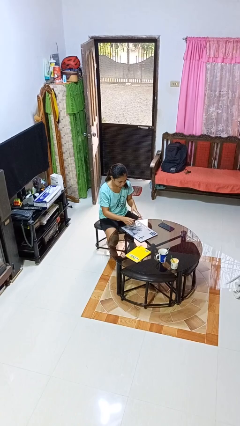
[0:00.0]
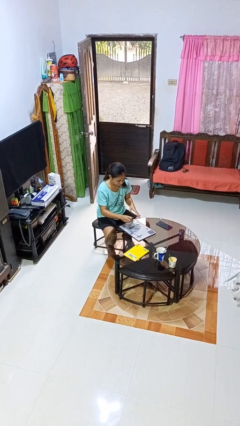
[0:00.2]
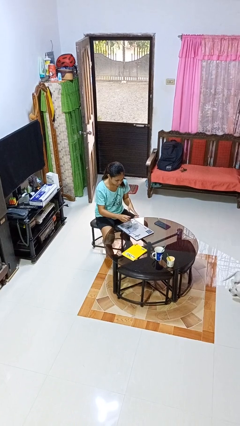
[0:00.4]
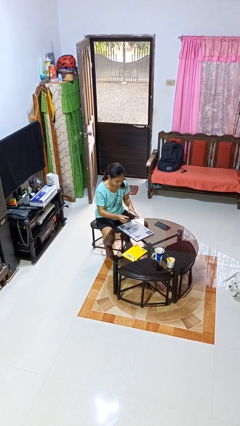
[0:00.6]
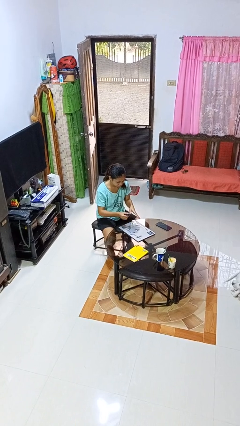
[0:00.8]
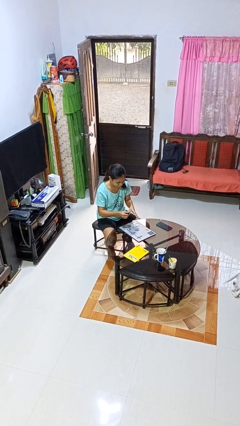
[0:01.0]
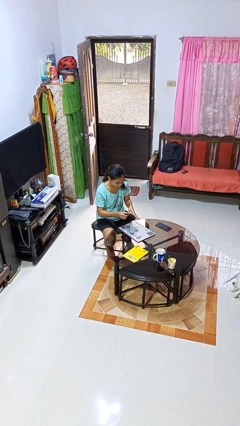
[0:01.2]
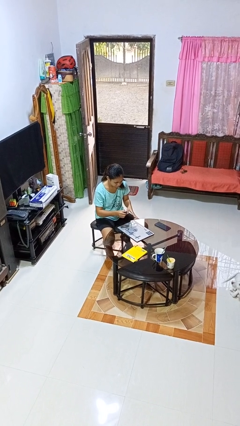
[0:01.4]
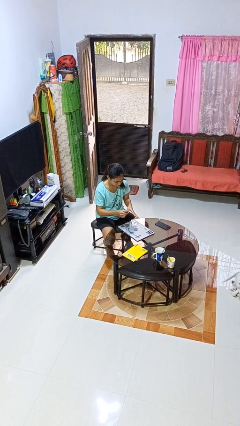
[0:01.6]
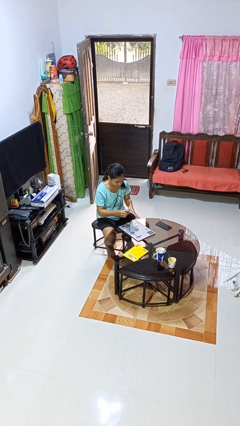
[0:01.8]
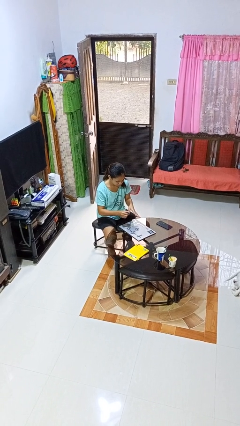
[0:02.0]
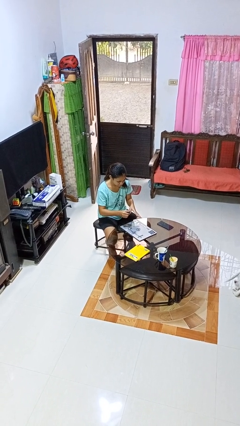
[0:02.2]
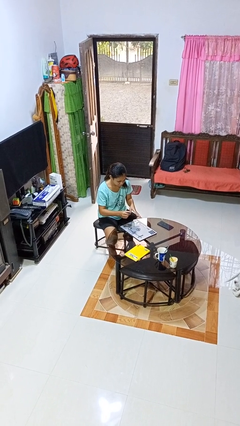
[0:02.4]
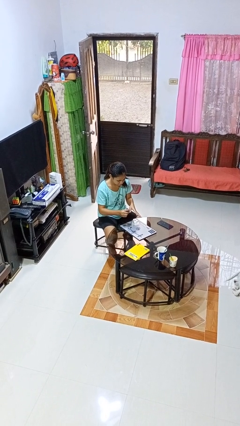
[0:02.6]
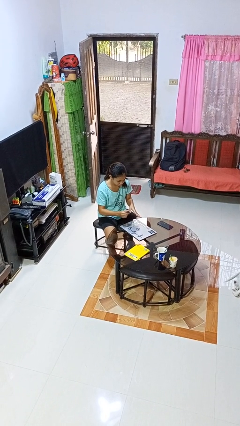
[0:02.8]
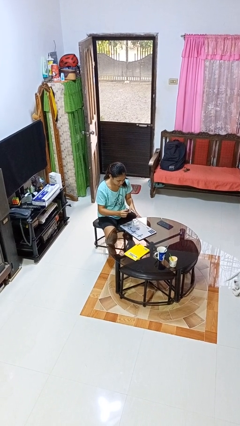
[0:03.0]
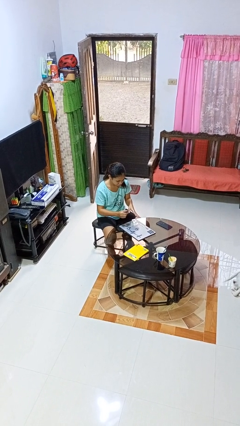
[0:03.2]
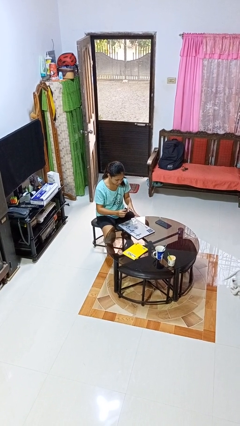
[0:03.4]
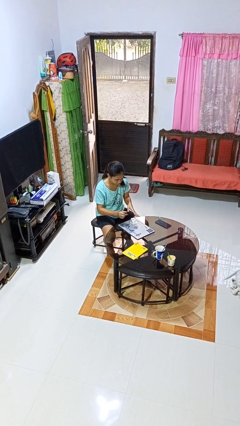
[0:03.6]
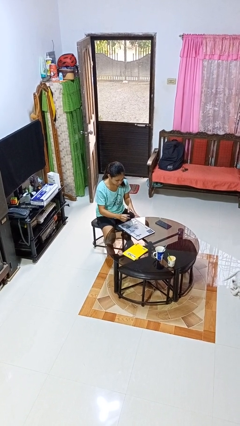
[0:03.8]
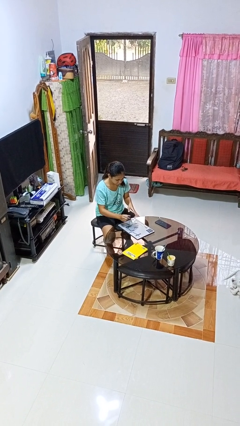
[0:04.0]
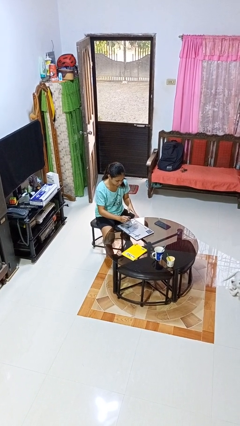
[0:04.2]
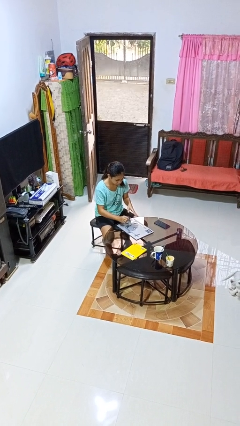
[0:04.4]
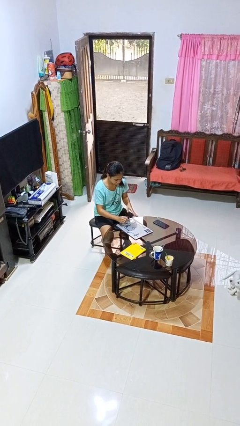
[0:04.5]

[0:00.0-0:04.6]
person paints fingernails

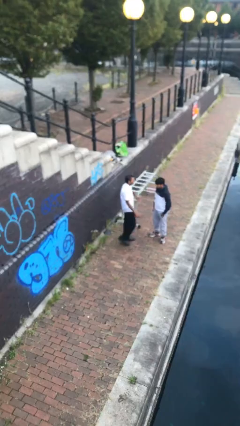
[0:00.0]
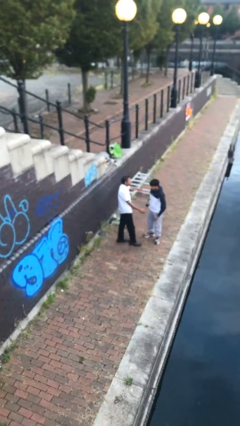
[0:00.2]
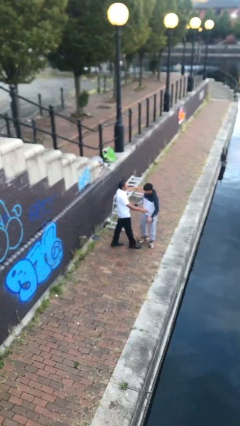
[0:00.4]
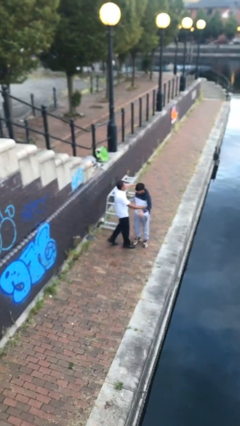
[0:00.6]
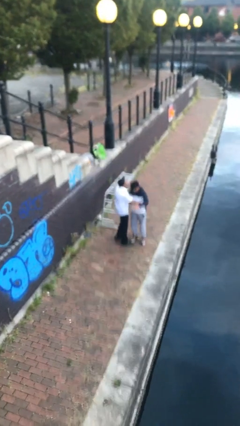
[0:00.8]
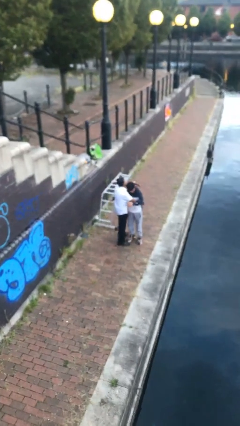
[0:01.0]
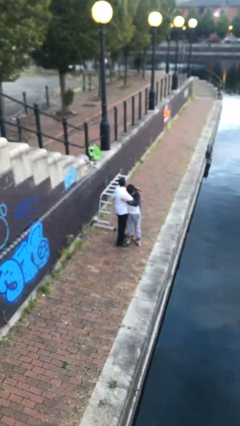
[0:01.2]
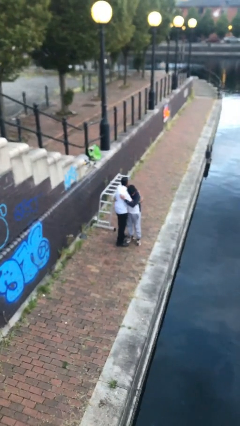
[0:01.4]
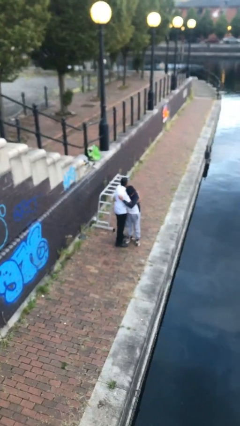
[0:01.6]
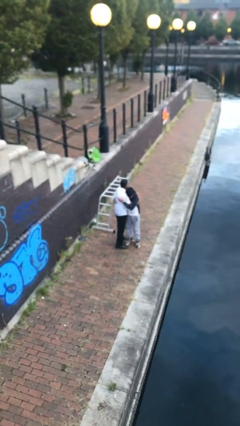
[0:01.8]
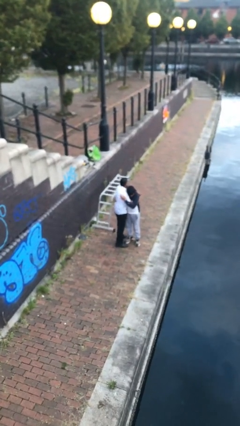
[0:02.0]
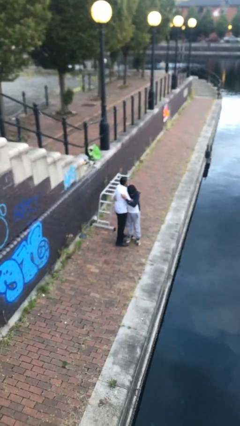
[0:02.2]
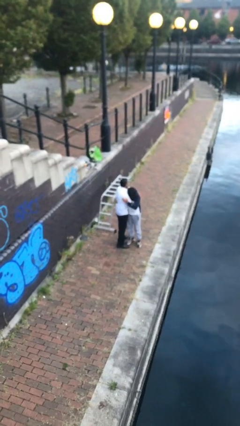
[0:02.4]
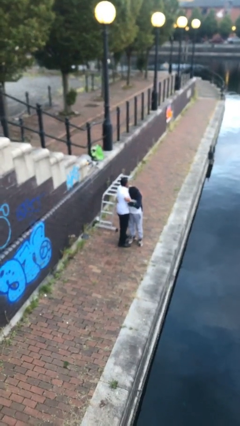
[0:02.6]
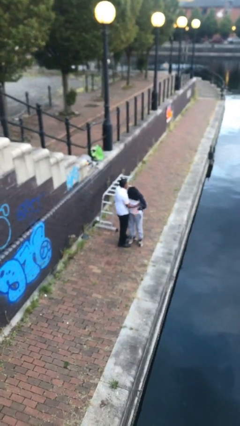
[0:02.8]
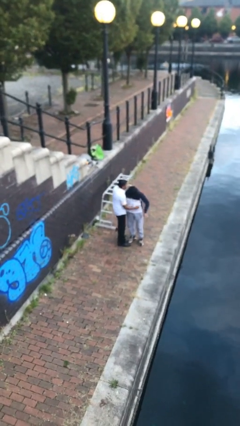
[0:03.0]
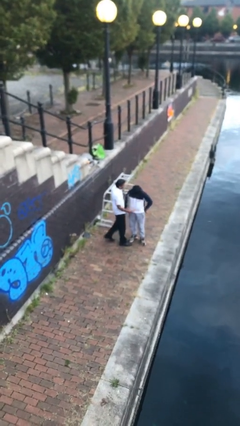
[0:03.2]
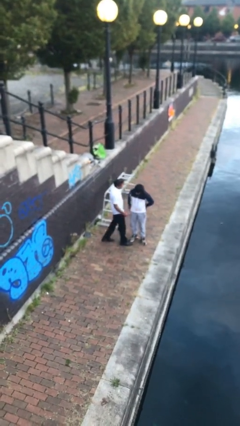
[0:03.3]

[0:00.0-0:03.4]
person embraces person

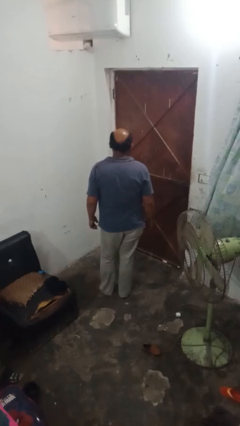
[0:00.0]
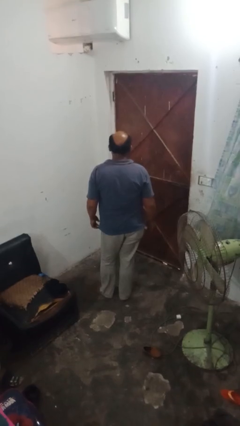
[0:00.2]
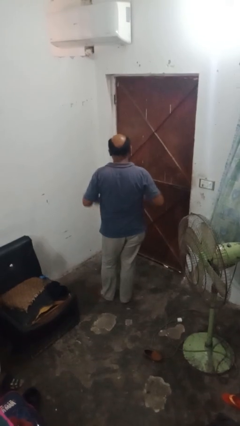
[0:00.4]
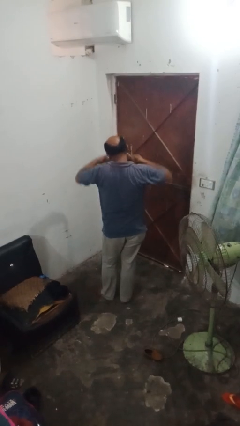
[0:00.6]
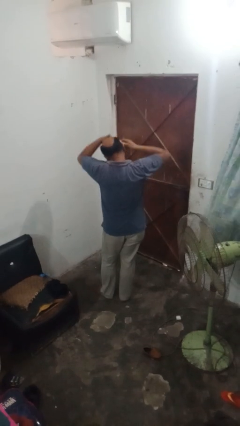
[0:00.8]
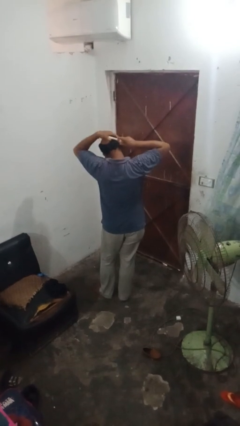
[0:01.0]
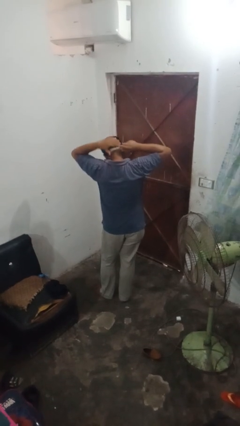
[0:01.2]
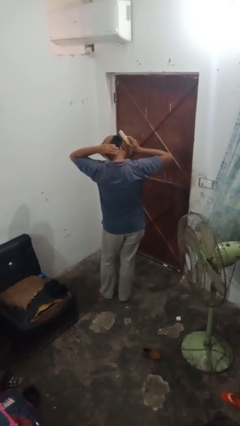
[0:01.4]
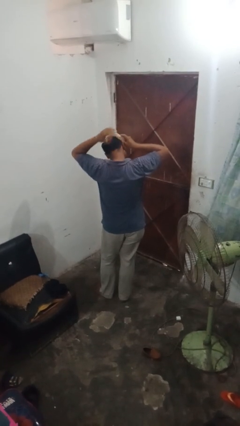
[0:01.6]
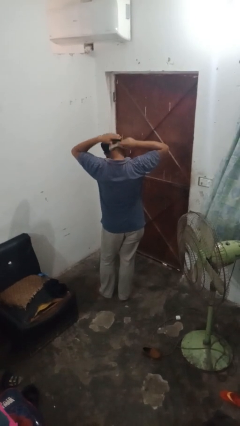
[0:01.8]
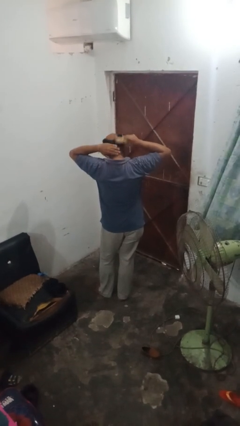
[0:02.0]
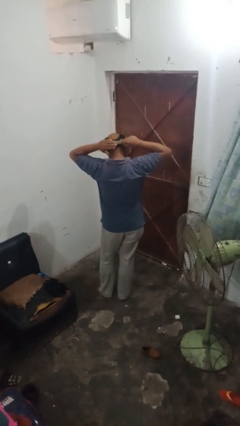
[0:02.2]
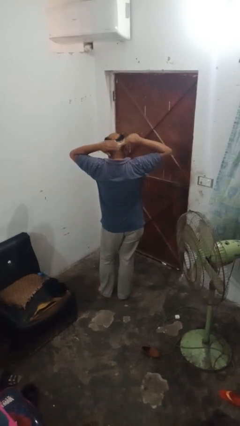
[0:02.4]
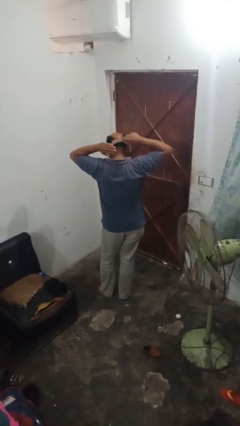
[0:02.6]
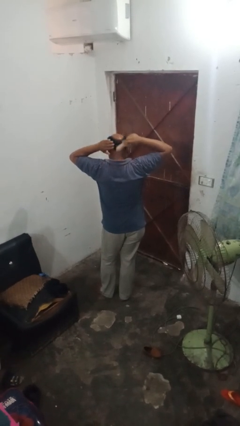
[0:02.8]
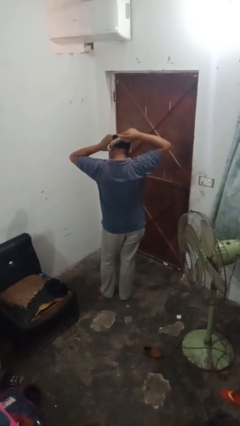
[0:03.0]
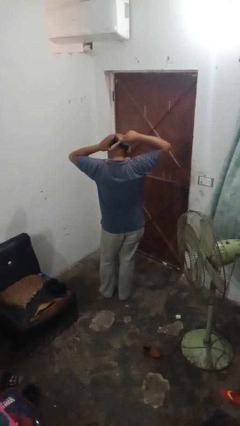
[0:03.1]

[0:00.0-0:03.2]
person brushes hair

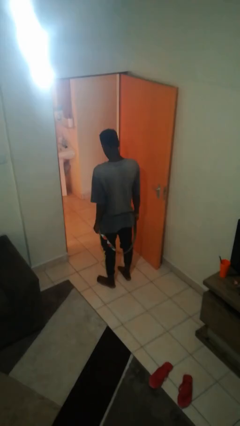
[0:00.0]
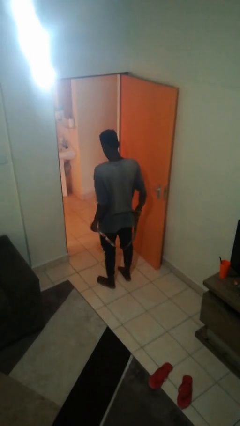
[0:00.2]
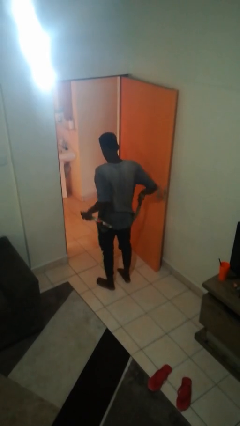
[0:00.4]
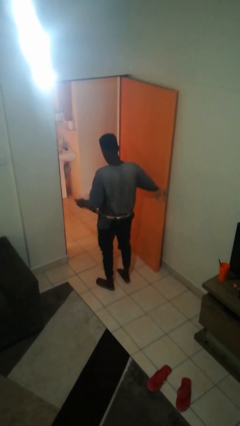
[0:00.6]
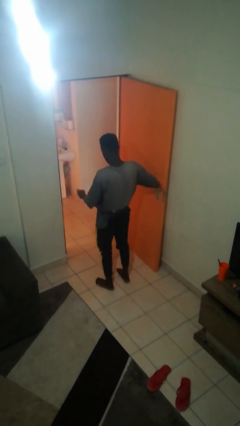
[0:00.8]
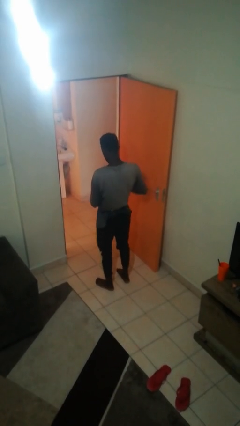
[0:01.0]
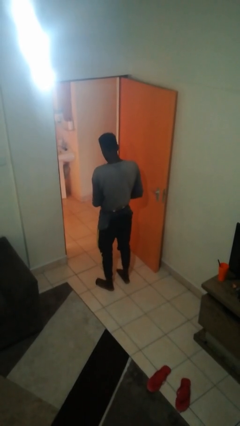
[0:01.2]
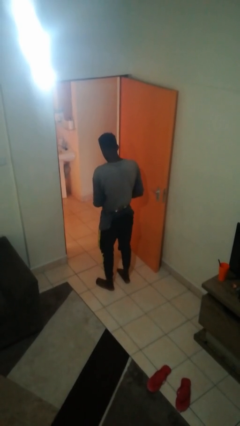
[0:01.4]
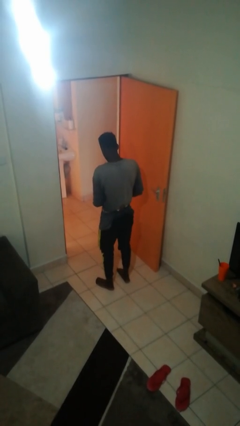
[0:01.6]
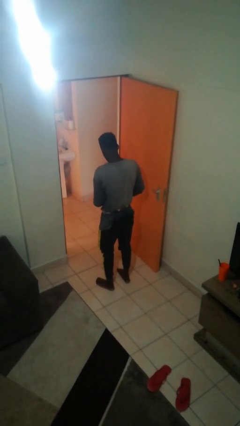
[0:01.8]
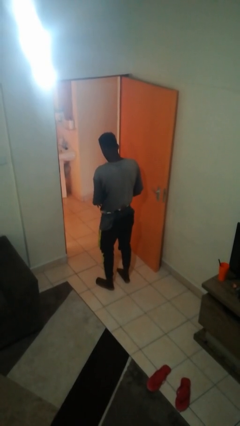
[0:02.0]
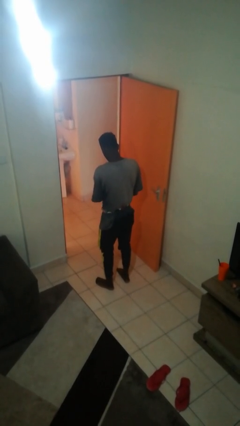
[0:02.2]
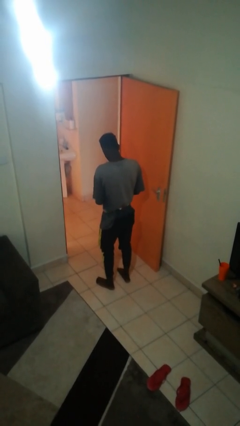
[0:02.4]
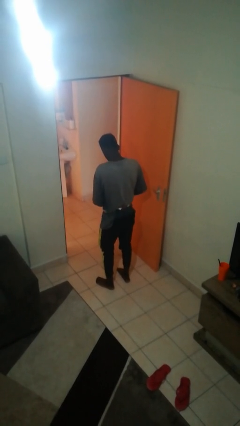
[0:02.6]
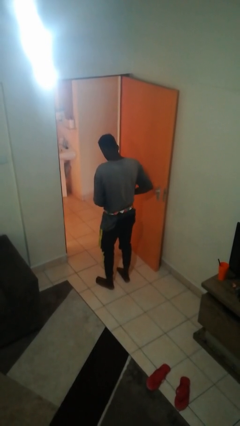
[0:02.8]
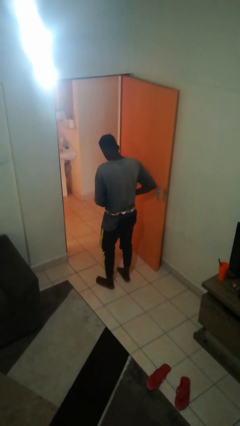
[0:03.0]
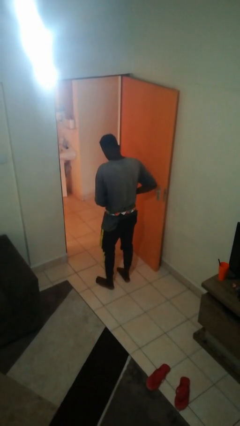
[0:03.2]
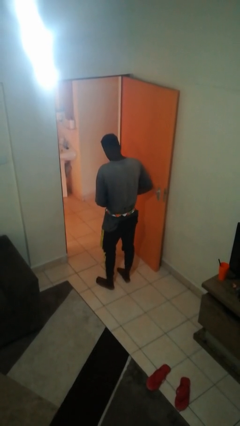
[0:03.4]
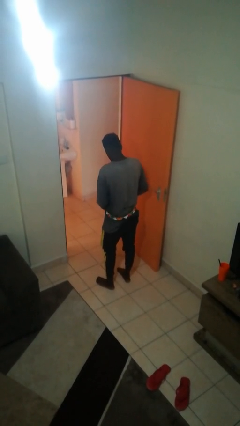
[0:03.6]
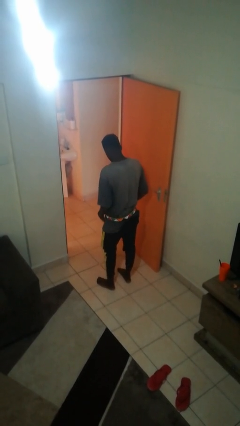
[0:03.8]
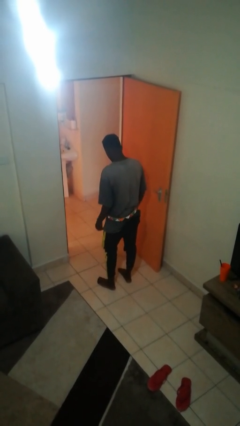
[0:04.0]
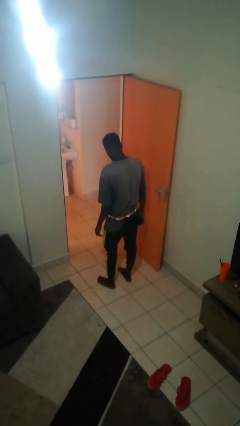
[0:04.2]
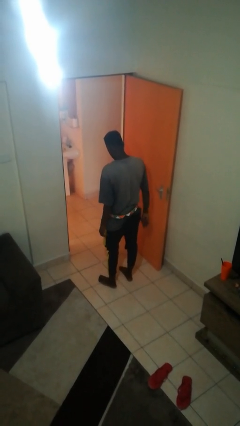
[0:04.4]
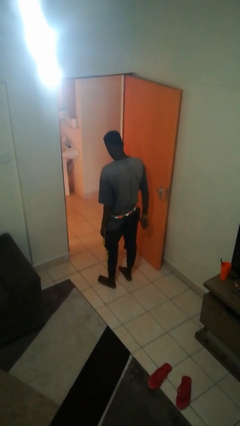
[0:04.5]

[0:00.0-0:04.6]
person puts on belt

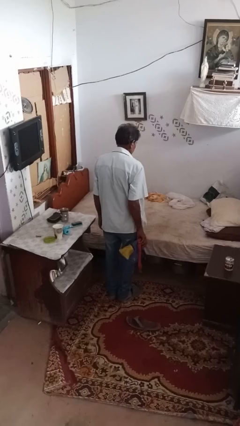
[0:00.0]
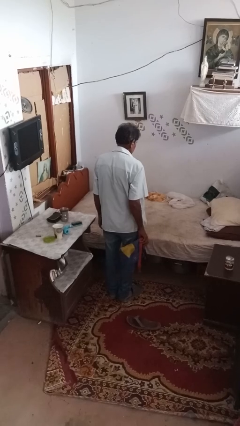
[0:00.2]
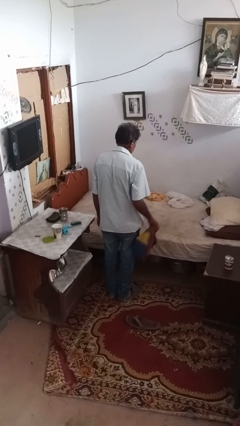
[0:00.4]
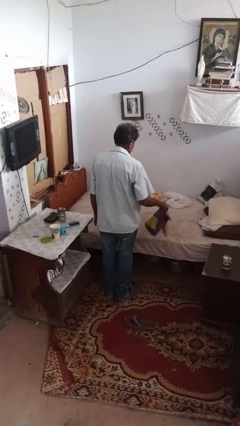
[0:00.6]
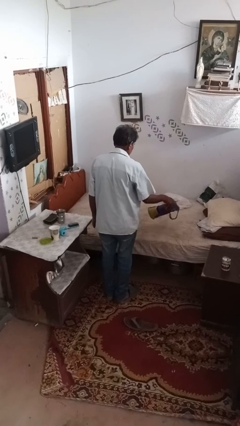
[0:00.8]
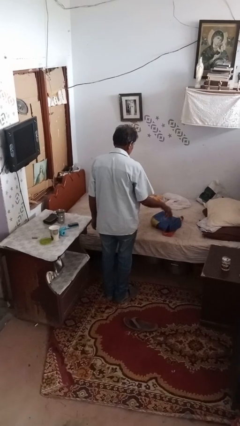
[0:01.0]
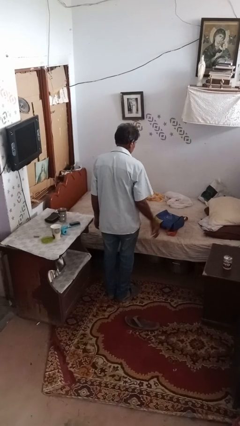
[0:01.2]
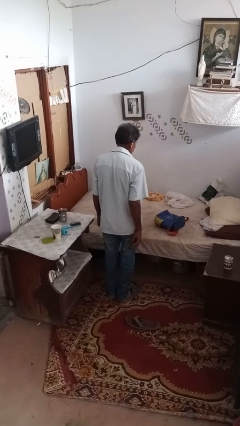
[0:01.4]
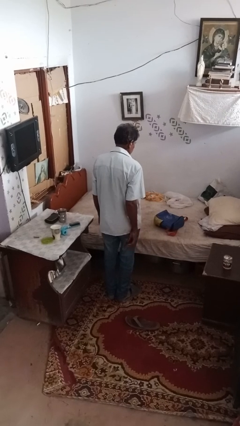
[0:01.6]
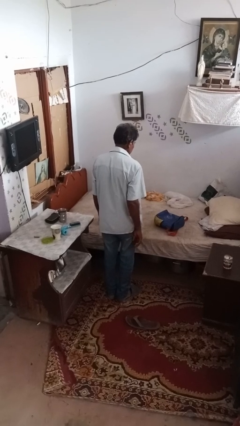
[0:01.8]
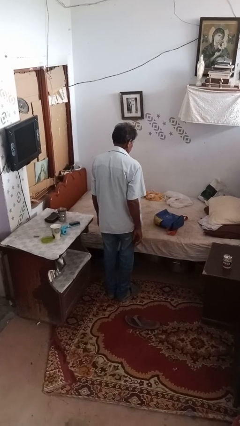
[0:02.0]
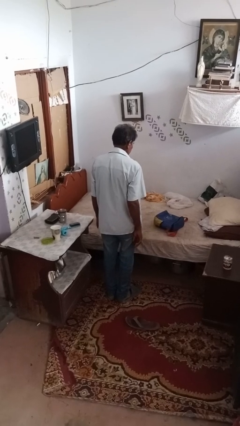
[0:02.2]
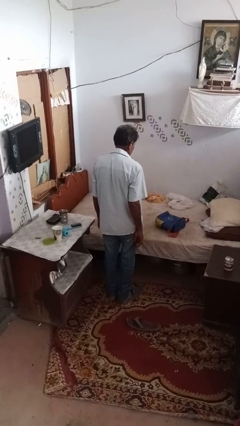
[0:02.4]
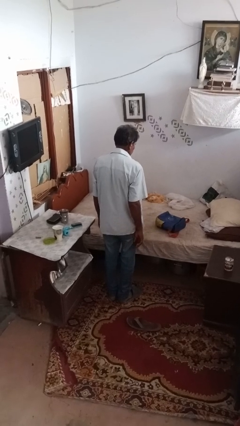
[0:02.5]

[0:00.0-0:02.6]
person throws object on bed
